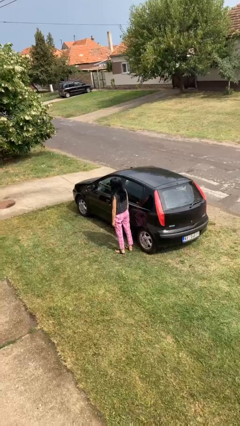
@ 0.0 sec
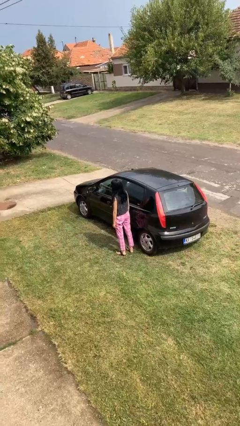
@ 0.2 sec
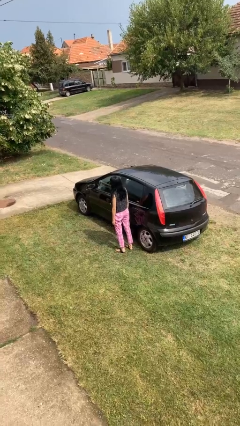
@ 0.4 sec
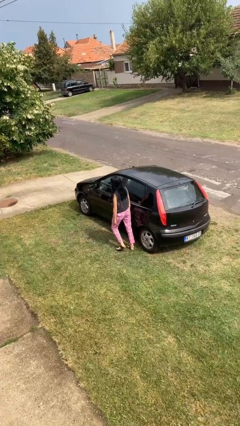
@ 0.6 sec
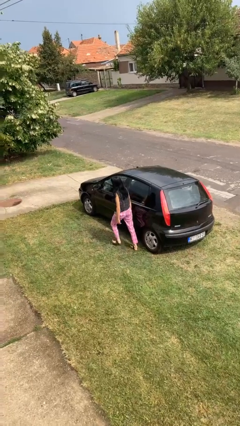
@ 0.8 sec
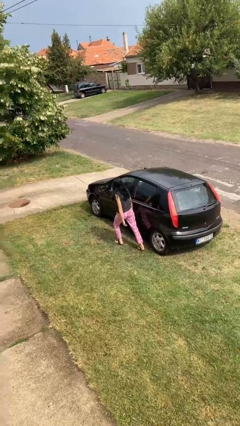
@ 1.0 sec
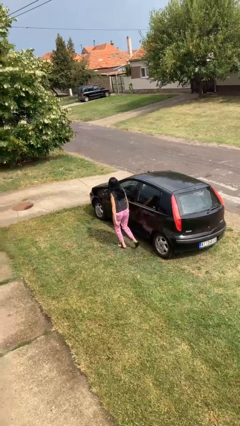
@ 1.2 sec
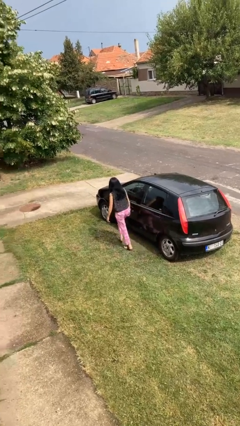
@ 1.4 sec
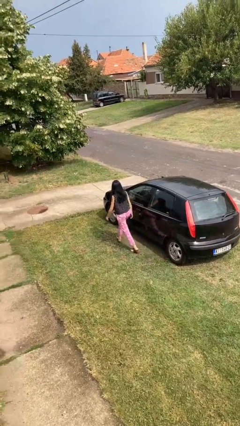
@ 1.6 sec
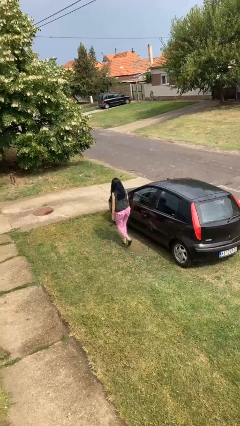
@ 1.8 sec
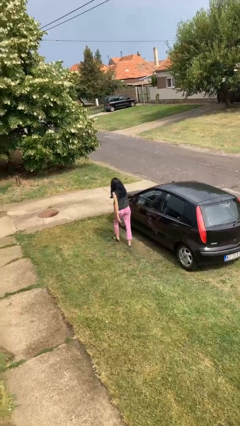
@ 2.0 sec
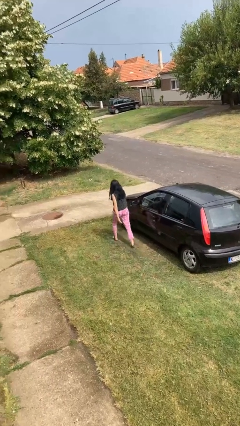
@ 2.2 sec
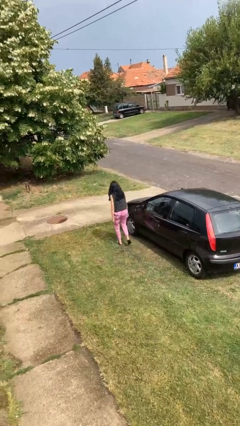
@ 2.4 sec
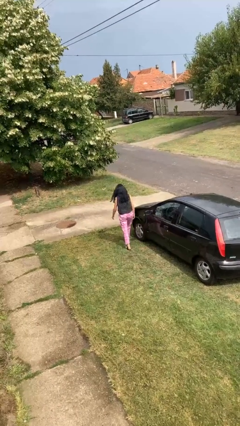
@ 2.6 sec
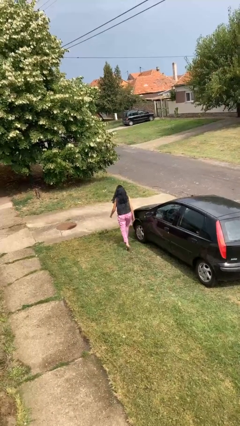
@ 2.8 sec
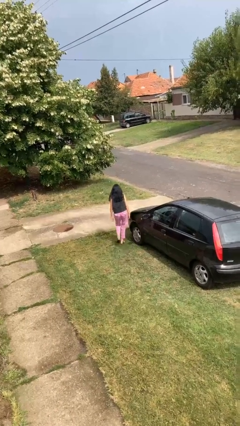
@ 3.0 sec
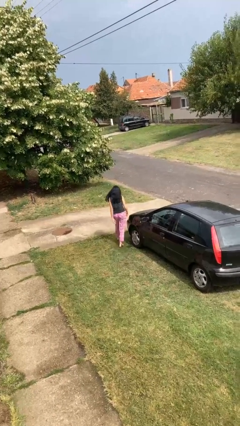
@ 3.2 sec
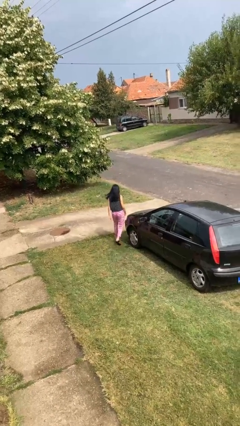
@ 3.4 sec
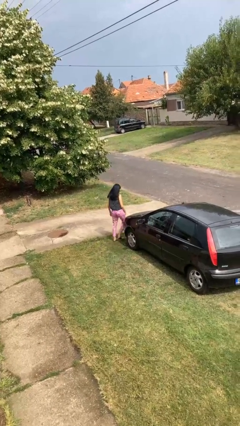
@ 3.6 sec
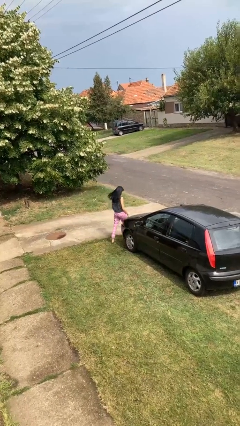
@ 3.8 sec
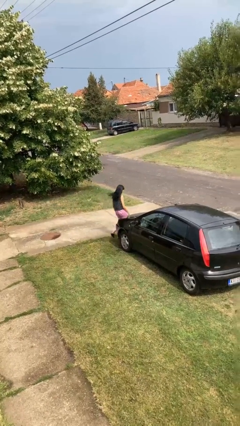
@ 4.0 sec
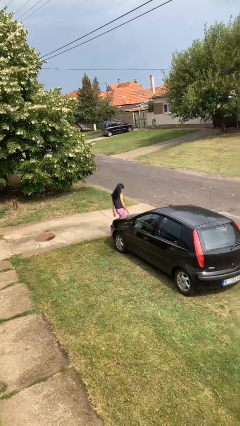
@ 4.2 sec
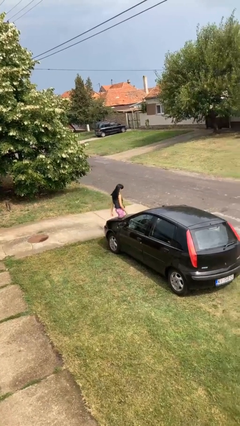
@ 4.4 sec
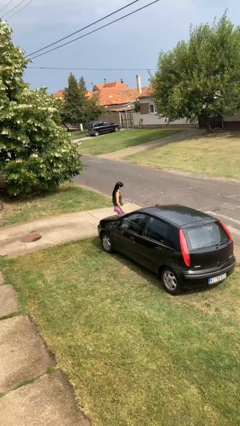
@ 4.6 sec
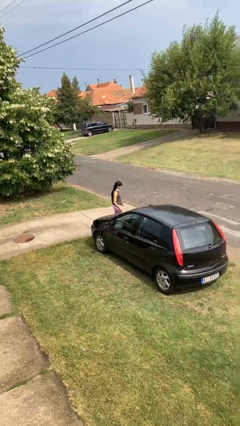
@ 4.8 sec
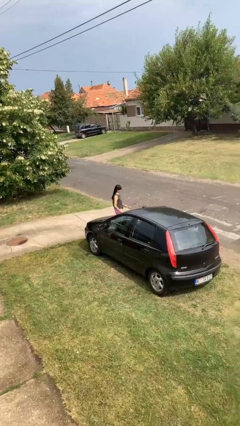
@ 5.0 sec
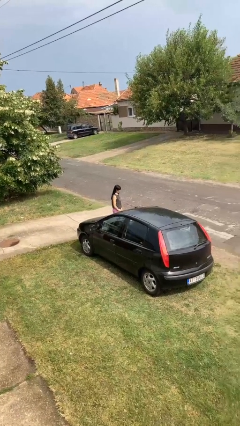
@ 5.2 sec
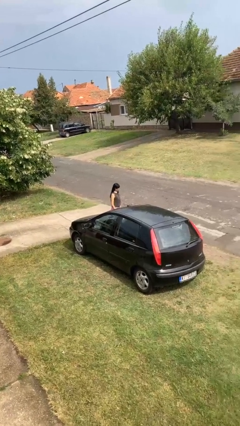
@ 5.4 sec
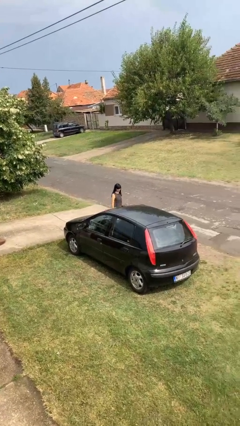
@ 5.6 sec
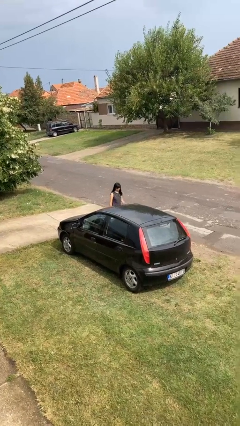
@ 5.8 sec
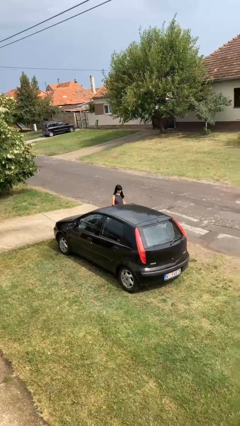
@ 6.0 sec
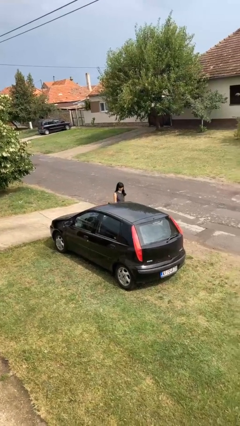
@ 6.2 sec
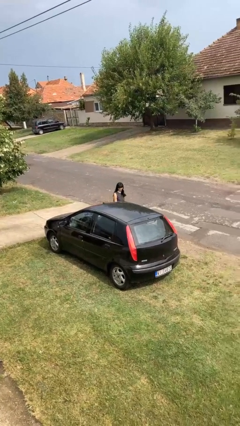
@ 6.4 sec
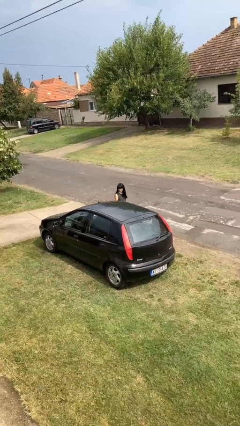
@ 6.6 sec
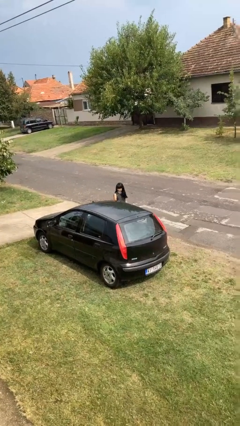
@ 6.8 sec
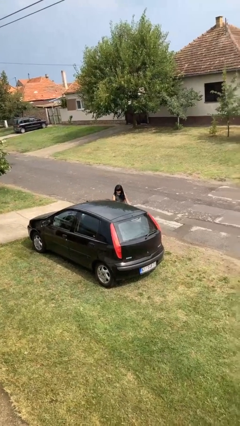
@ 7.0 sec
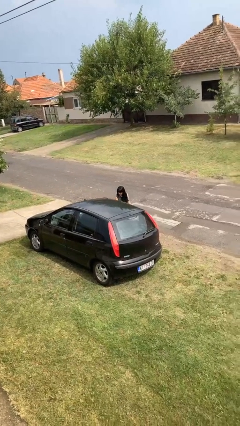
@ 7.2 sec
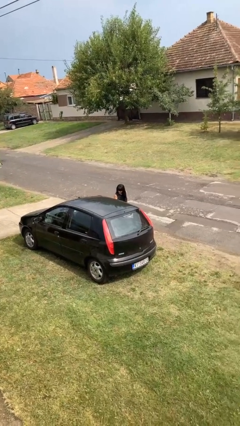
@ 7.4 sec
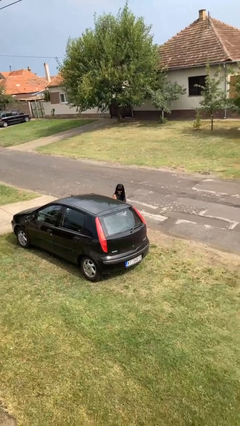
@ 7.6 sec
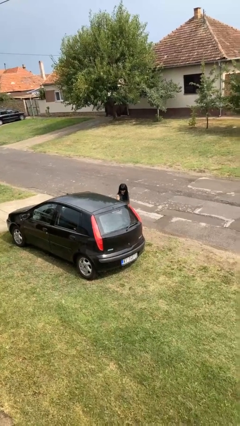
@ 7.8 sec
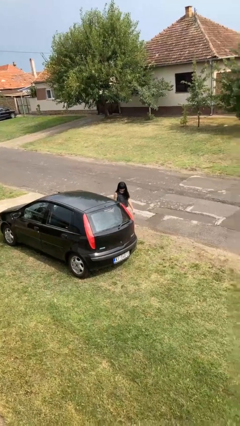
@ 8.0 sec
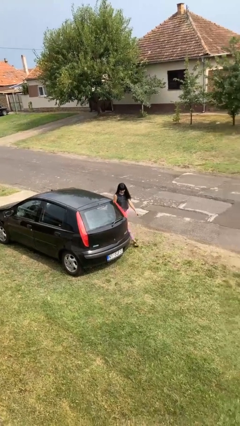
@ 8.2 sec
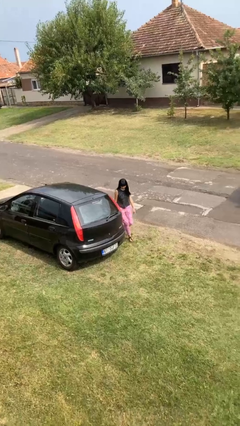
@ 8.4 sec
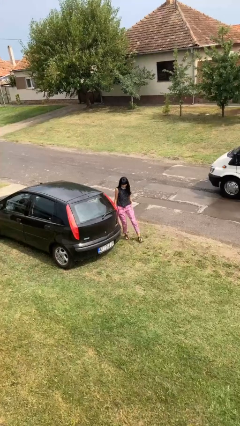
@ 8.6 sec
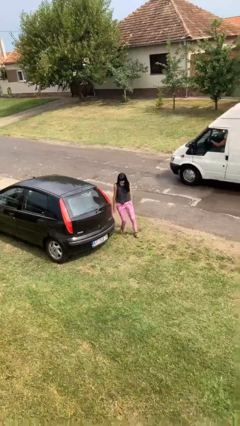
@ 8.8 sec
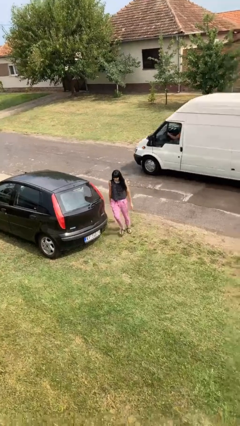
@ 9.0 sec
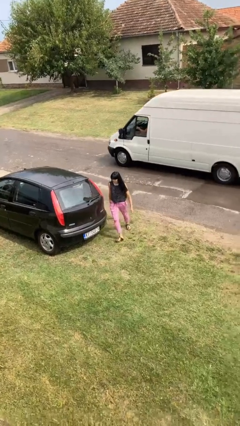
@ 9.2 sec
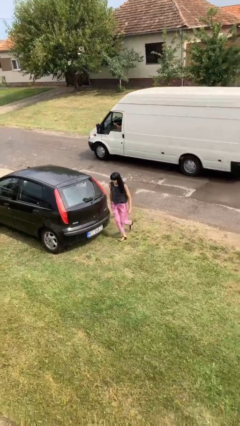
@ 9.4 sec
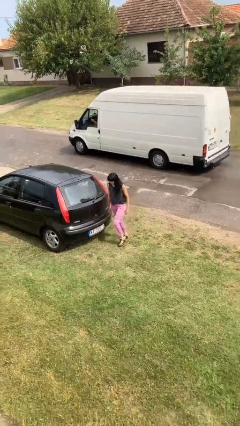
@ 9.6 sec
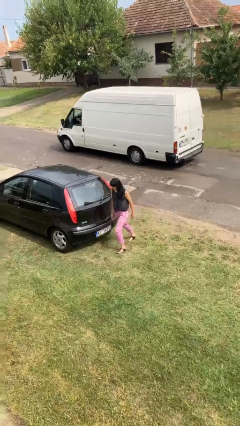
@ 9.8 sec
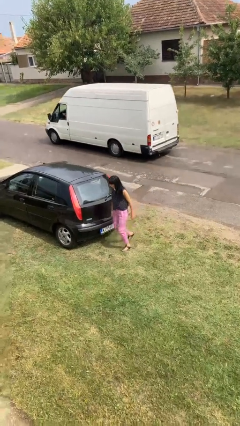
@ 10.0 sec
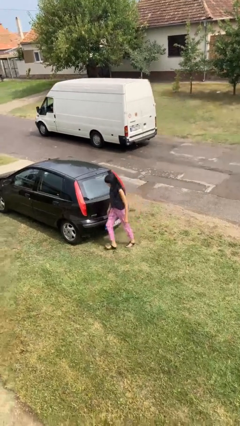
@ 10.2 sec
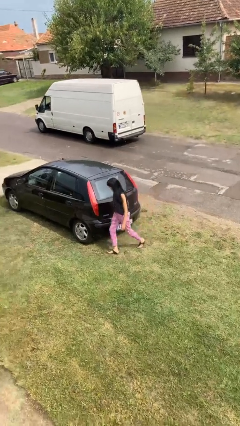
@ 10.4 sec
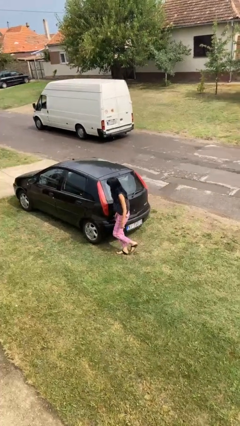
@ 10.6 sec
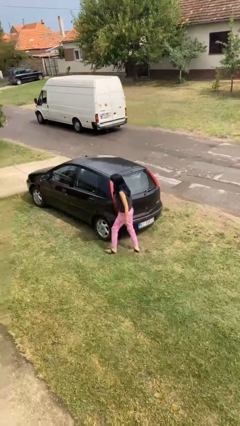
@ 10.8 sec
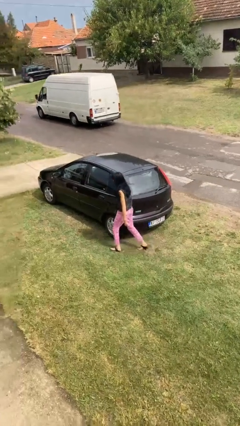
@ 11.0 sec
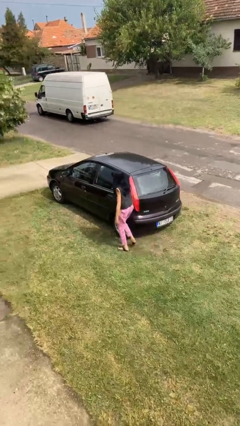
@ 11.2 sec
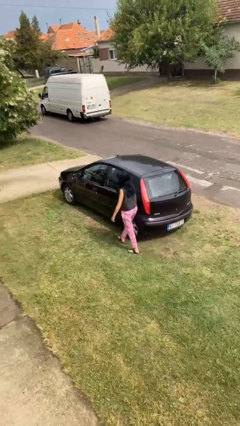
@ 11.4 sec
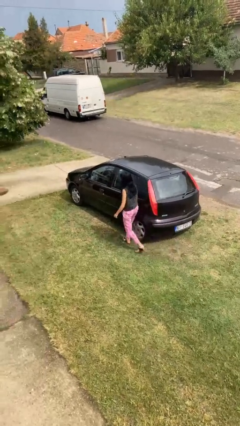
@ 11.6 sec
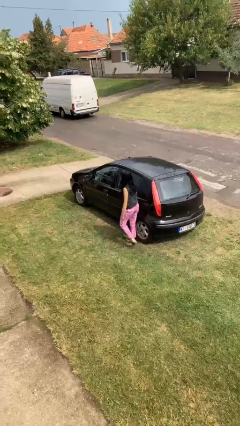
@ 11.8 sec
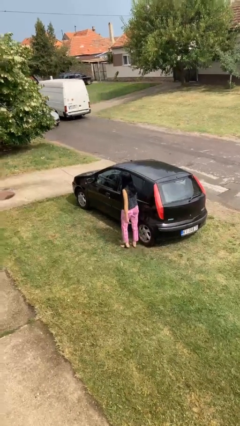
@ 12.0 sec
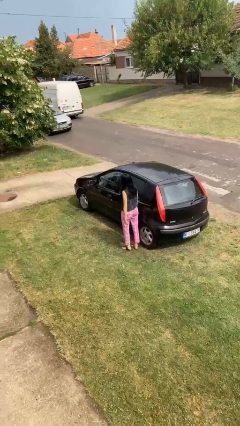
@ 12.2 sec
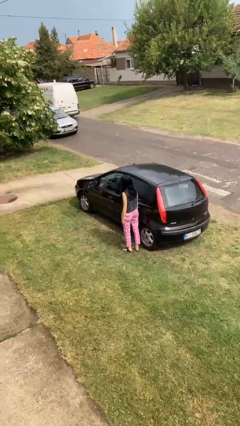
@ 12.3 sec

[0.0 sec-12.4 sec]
person walks around car

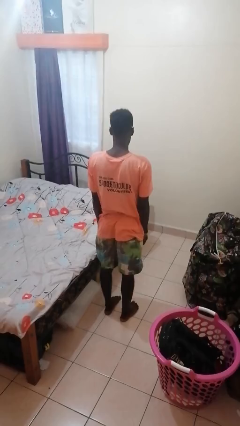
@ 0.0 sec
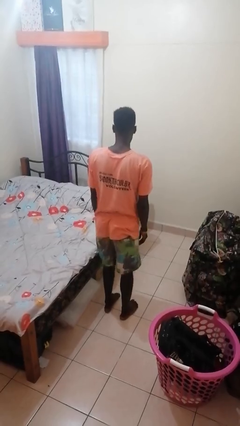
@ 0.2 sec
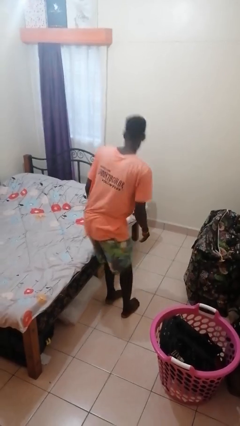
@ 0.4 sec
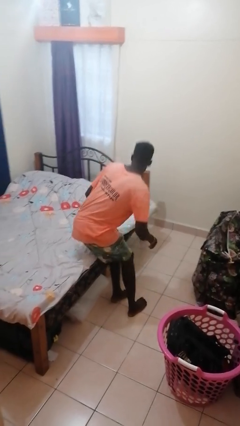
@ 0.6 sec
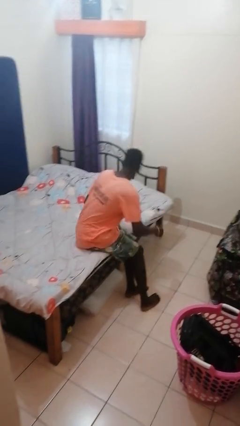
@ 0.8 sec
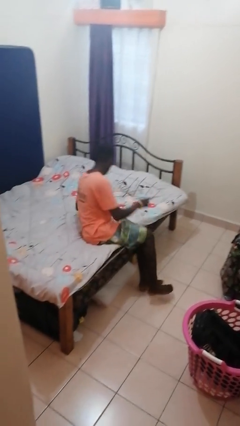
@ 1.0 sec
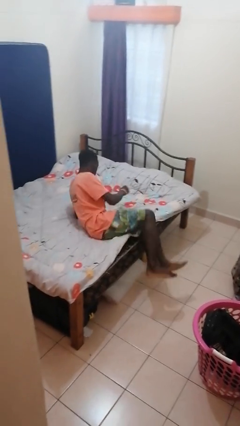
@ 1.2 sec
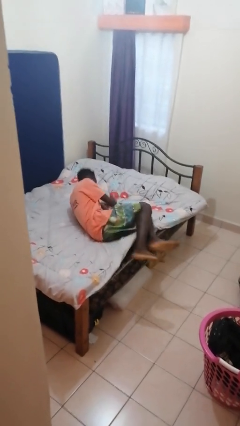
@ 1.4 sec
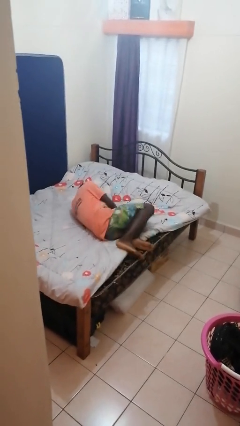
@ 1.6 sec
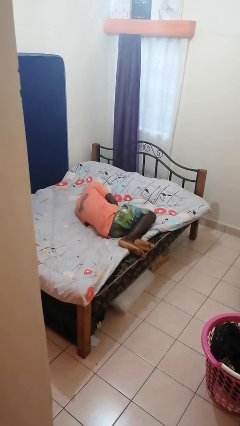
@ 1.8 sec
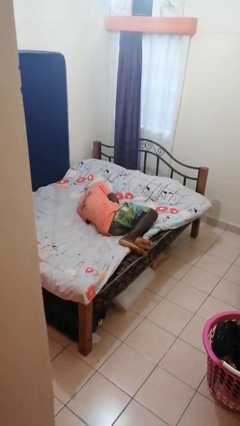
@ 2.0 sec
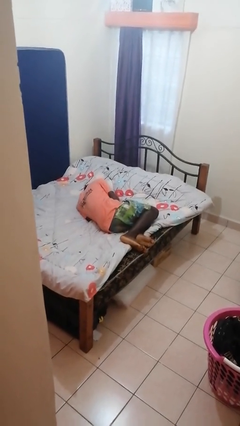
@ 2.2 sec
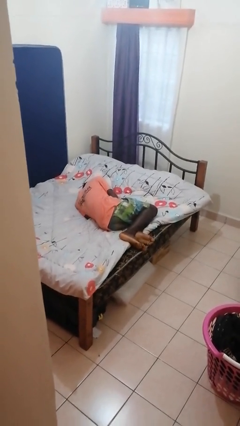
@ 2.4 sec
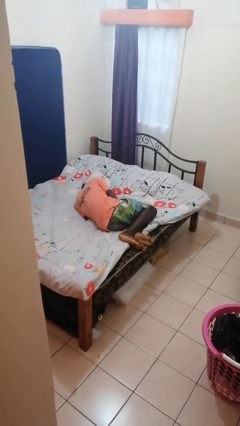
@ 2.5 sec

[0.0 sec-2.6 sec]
person lies down on bed

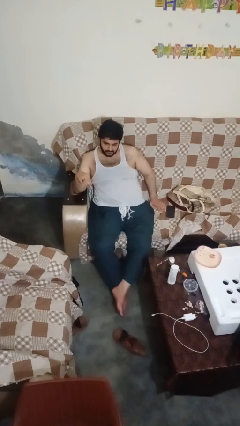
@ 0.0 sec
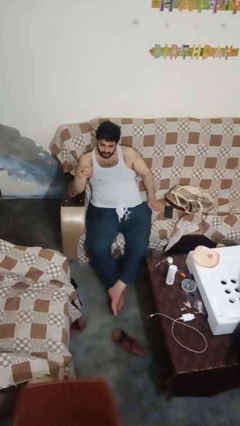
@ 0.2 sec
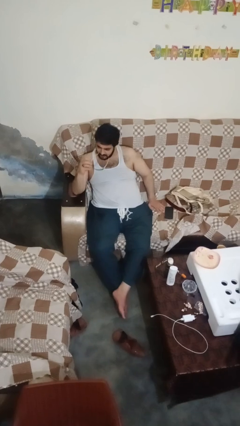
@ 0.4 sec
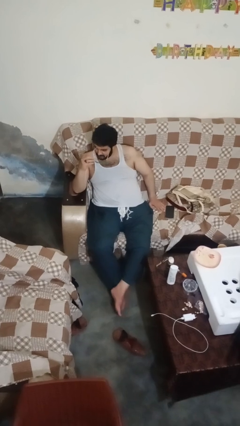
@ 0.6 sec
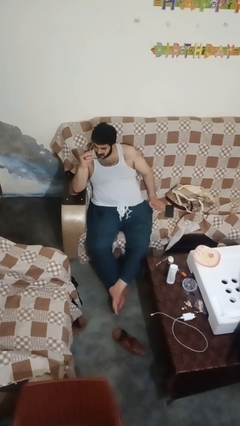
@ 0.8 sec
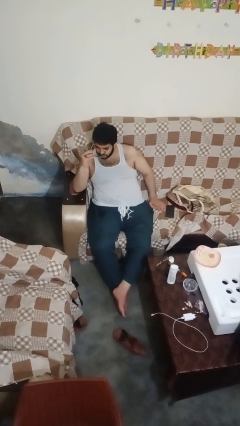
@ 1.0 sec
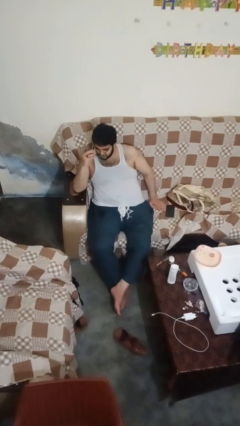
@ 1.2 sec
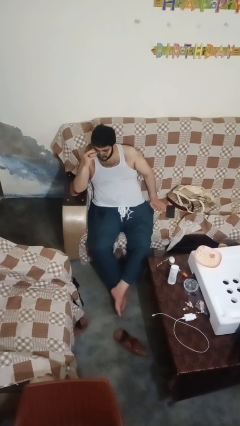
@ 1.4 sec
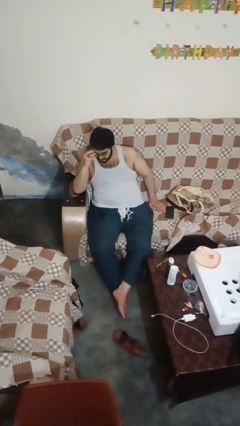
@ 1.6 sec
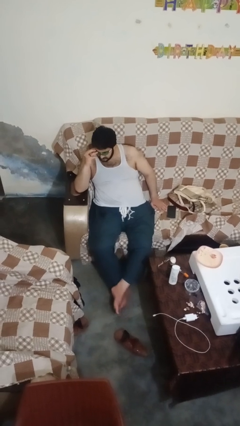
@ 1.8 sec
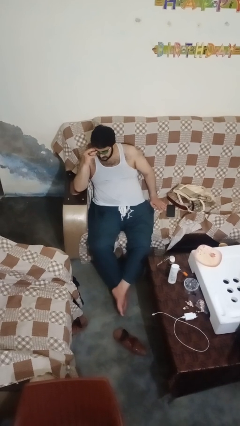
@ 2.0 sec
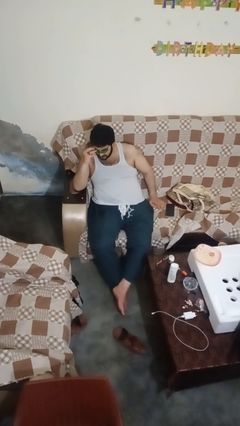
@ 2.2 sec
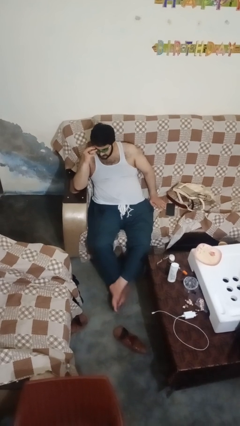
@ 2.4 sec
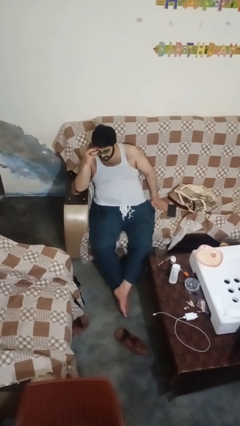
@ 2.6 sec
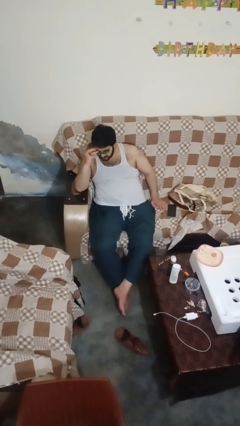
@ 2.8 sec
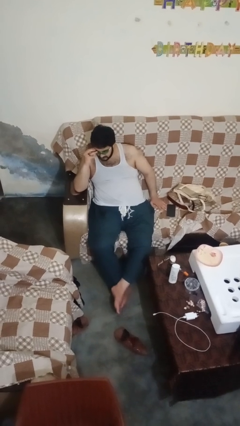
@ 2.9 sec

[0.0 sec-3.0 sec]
person puts on sunglasses
